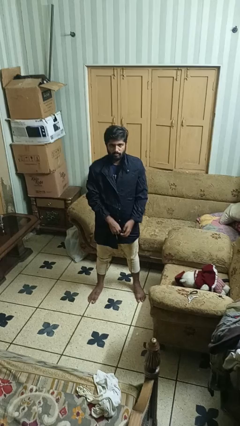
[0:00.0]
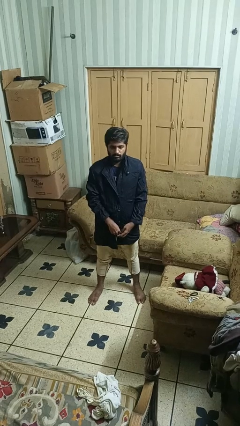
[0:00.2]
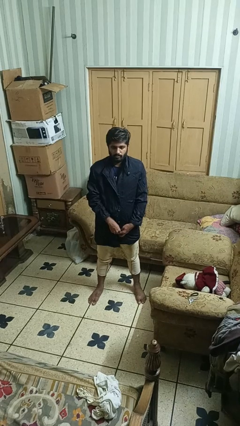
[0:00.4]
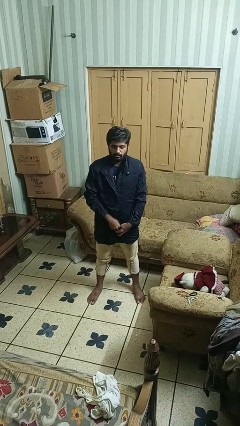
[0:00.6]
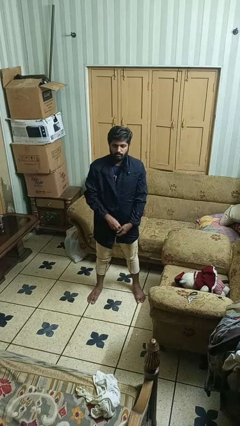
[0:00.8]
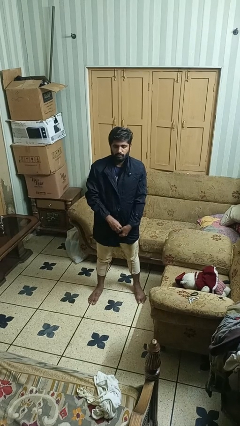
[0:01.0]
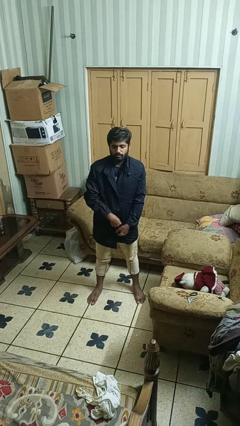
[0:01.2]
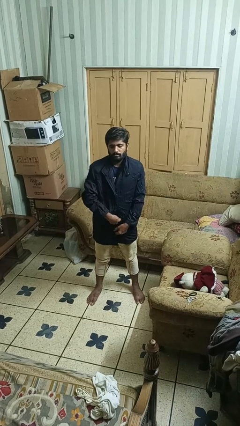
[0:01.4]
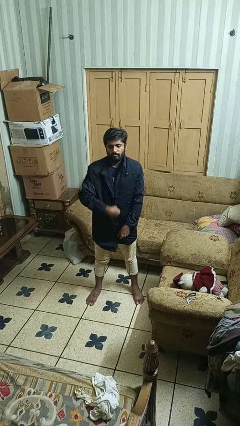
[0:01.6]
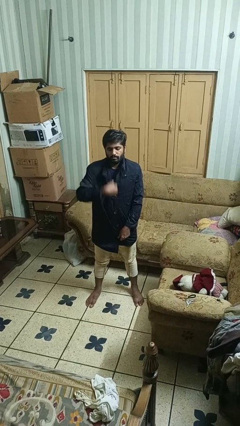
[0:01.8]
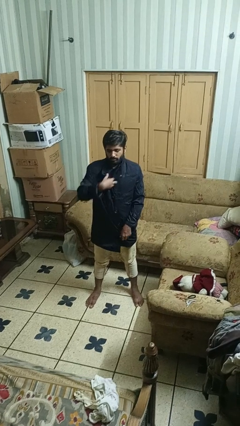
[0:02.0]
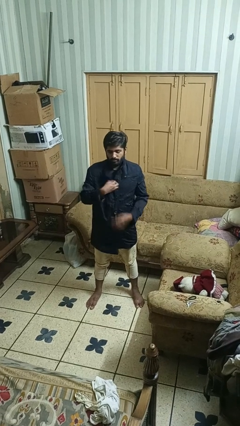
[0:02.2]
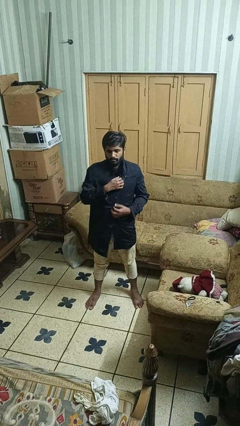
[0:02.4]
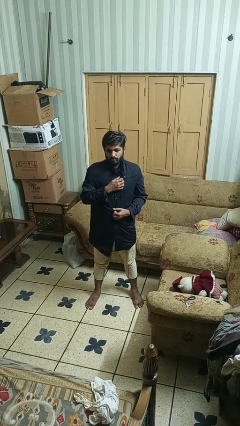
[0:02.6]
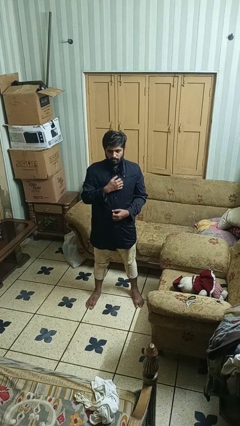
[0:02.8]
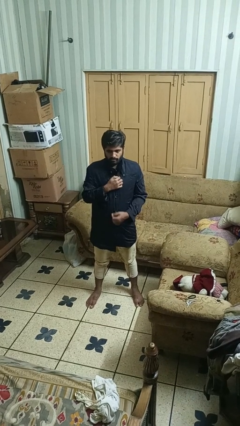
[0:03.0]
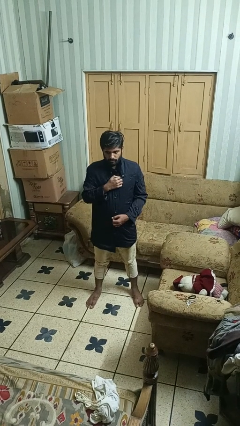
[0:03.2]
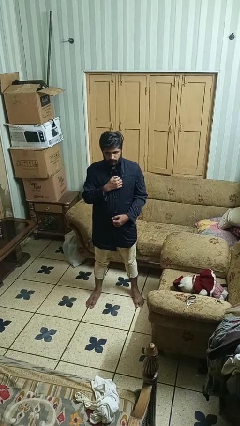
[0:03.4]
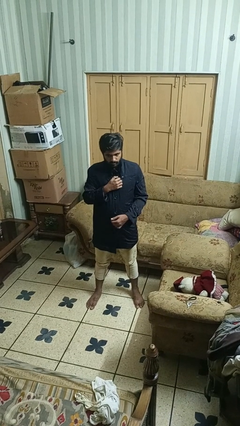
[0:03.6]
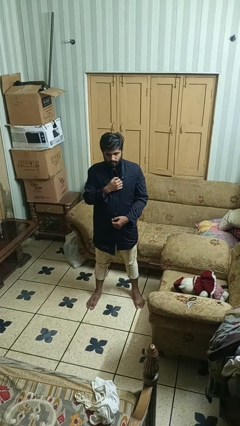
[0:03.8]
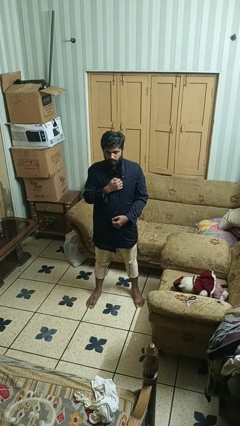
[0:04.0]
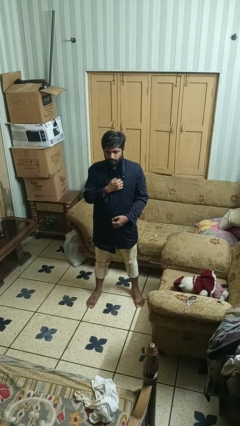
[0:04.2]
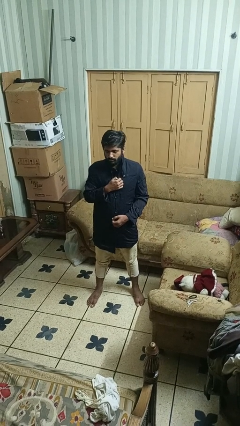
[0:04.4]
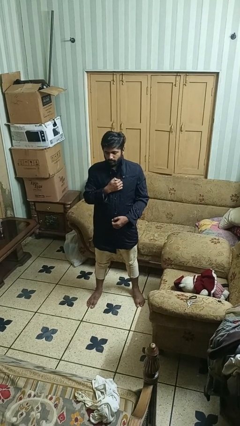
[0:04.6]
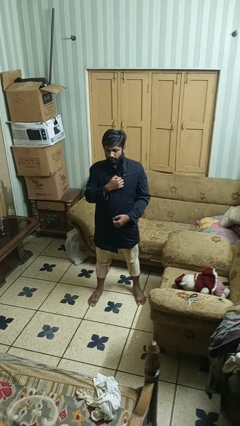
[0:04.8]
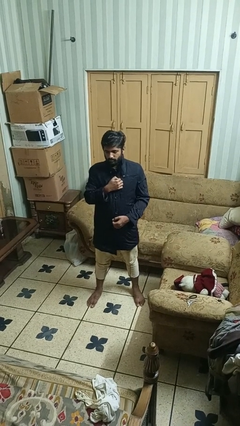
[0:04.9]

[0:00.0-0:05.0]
person zips up jacket

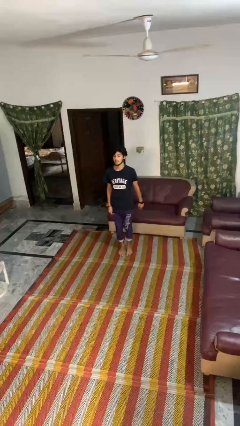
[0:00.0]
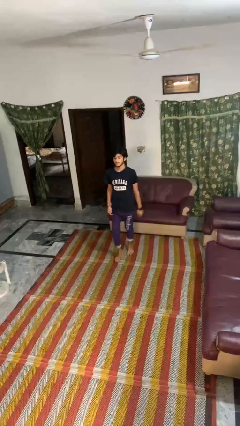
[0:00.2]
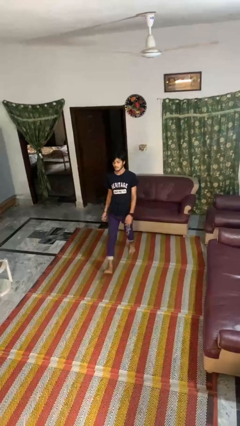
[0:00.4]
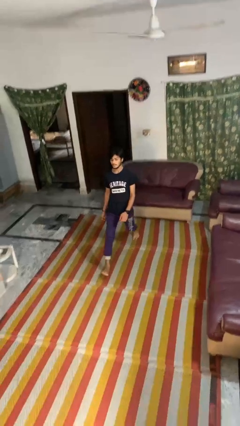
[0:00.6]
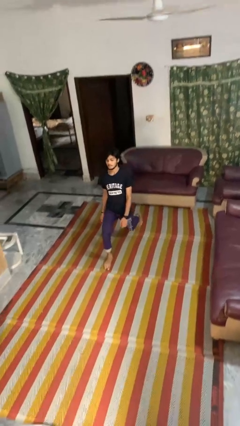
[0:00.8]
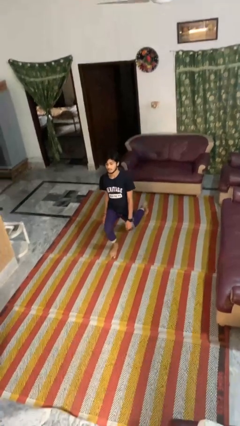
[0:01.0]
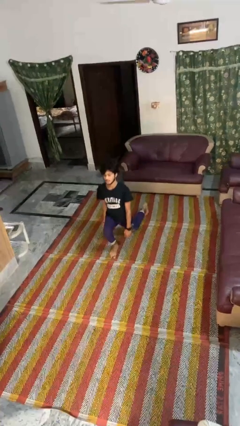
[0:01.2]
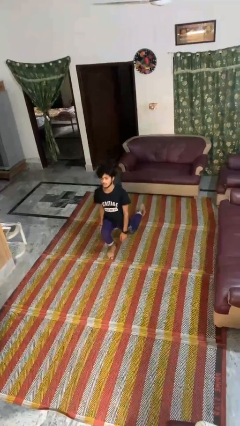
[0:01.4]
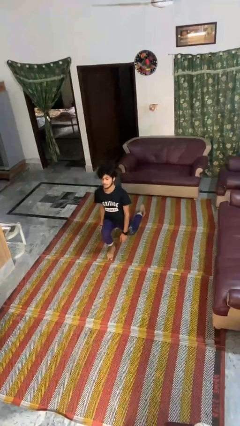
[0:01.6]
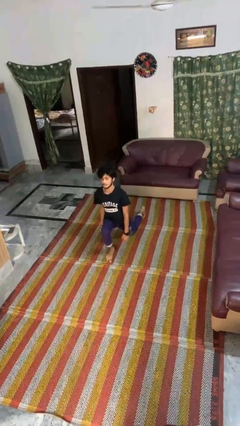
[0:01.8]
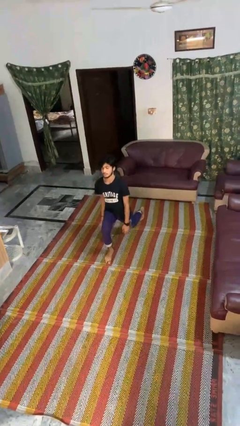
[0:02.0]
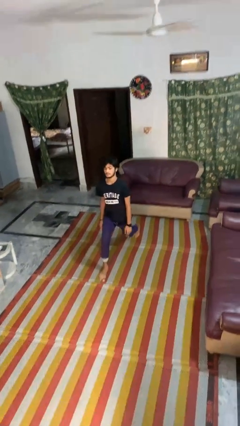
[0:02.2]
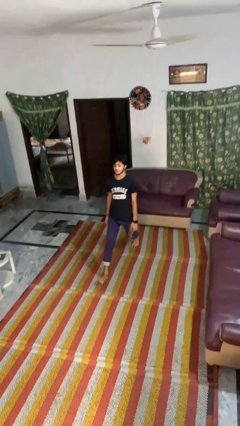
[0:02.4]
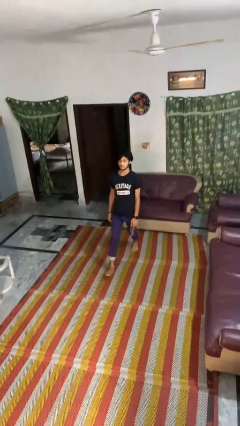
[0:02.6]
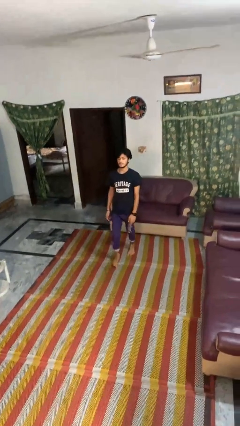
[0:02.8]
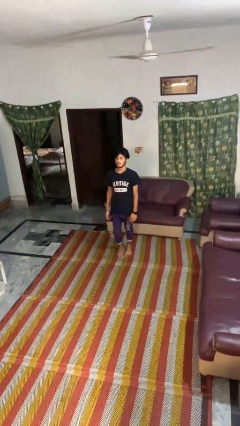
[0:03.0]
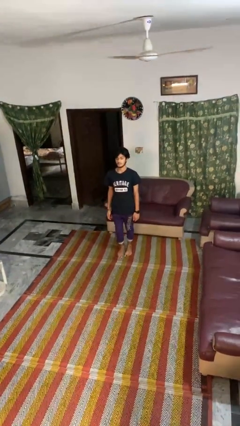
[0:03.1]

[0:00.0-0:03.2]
person exercises with lunges

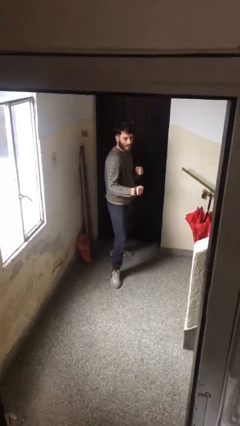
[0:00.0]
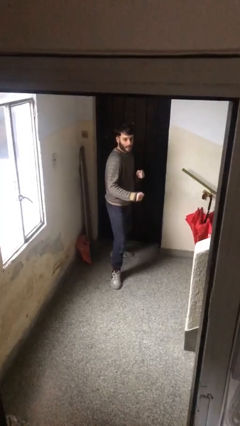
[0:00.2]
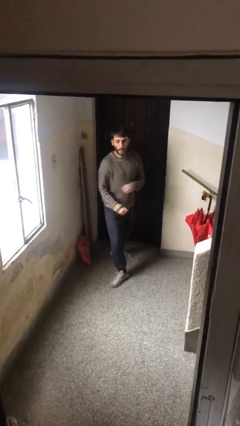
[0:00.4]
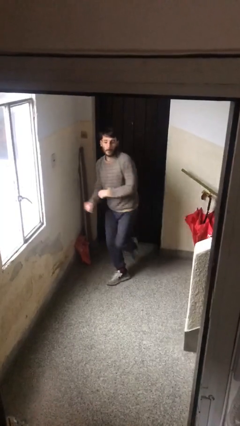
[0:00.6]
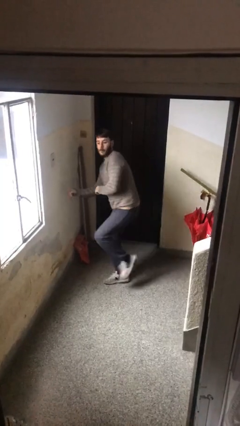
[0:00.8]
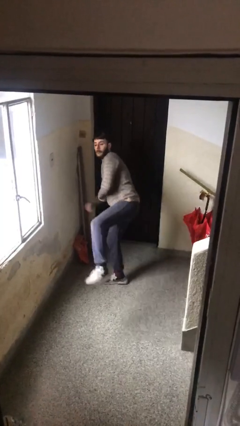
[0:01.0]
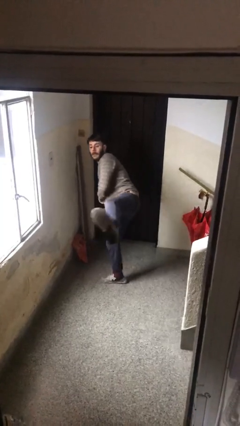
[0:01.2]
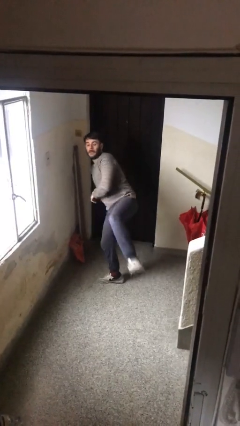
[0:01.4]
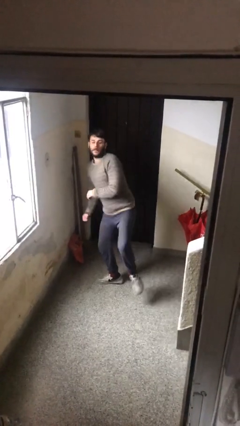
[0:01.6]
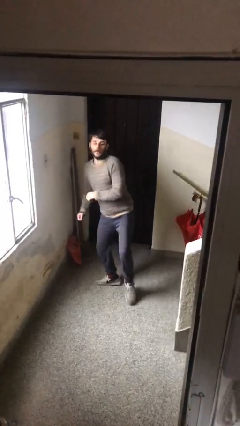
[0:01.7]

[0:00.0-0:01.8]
person karate kicks

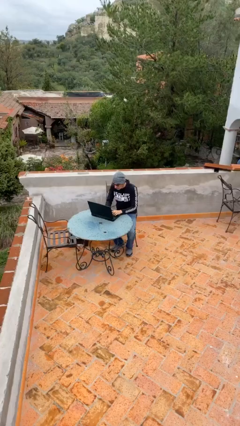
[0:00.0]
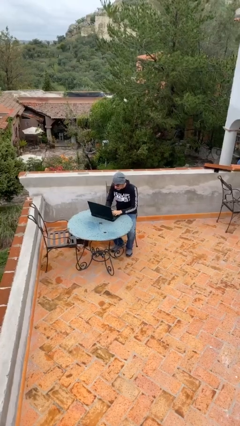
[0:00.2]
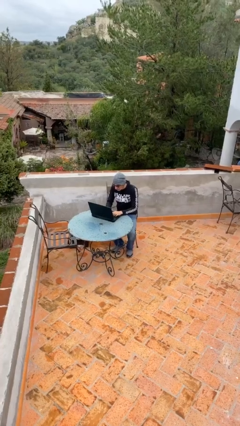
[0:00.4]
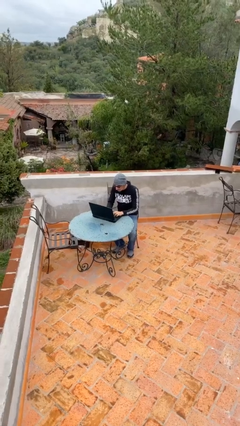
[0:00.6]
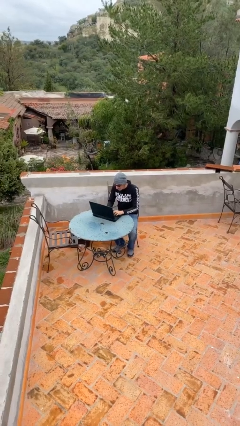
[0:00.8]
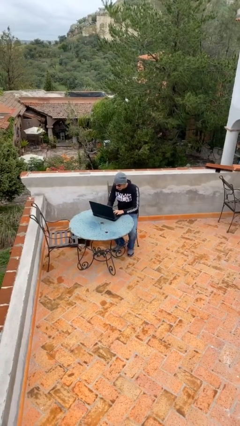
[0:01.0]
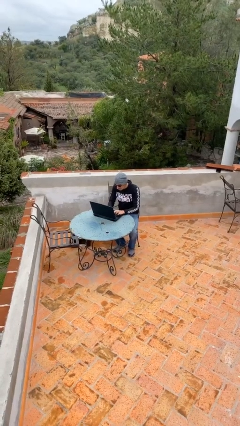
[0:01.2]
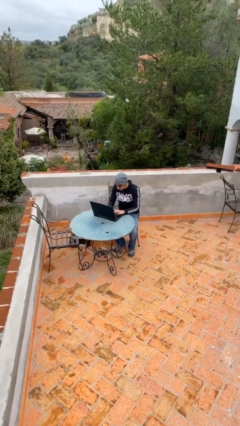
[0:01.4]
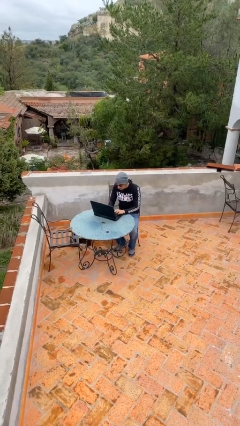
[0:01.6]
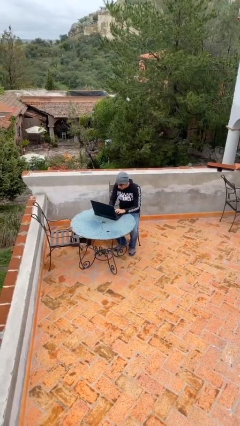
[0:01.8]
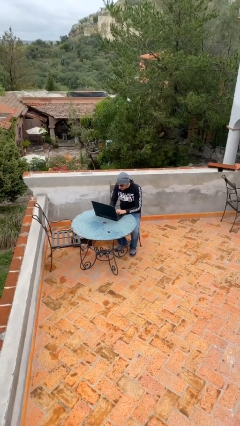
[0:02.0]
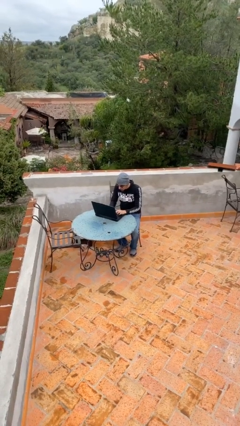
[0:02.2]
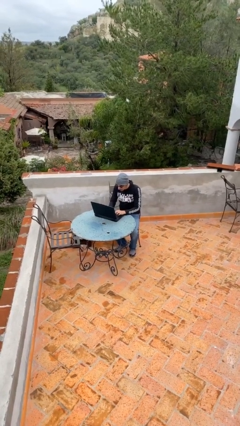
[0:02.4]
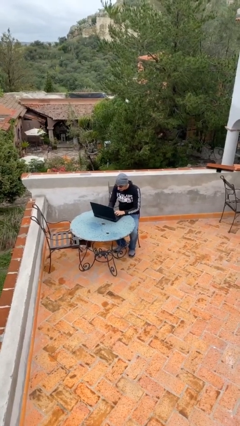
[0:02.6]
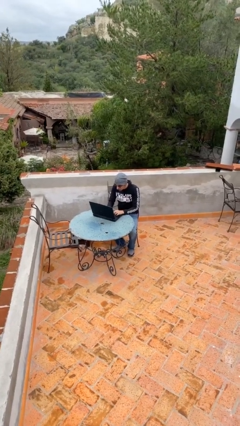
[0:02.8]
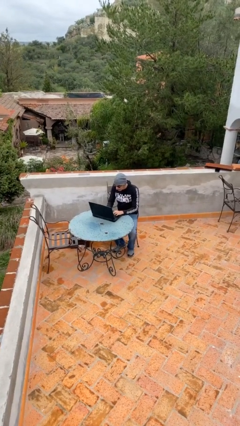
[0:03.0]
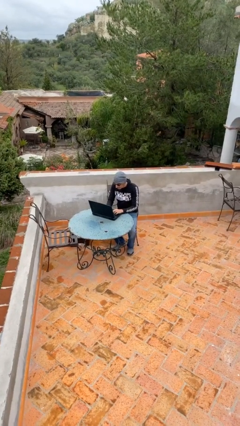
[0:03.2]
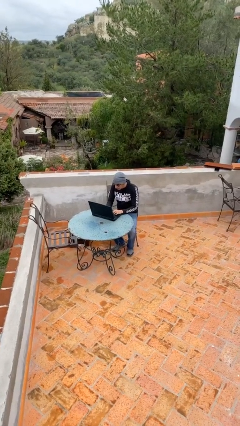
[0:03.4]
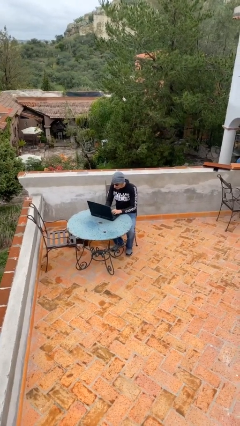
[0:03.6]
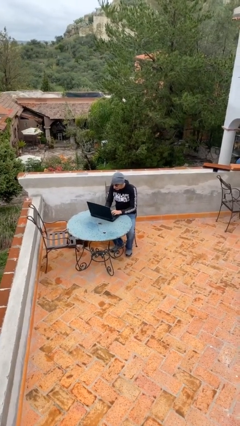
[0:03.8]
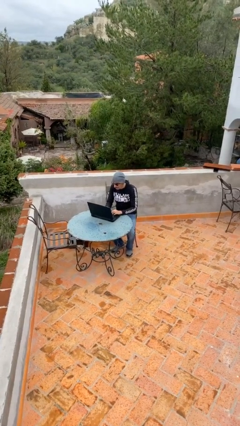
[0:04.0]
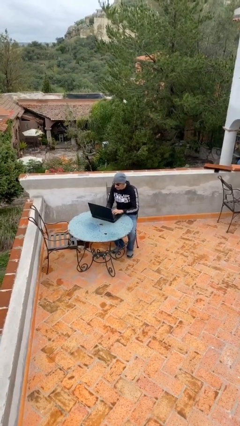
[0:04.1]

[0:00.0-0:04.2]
person interacts with laptop

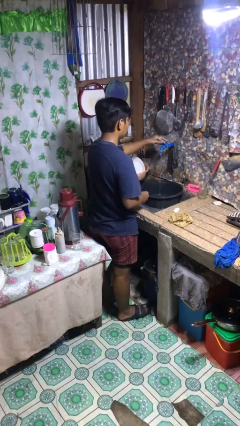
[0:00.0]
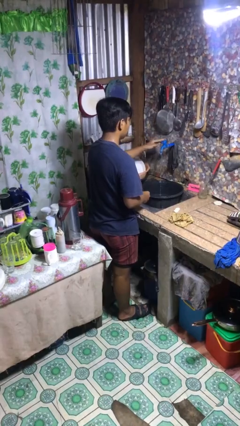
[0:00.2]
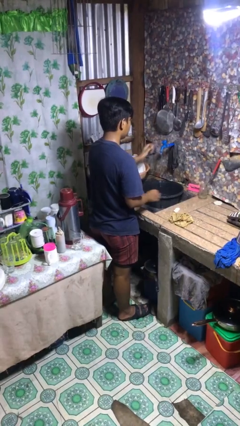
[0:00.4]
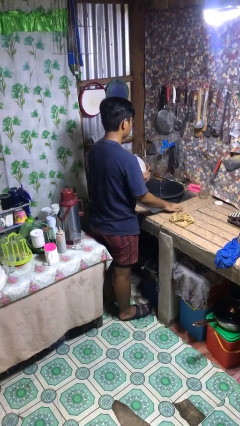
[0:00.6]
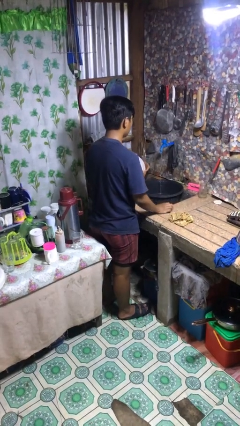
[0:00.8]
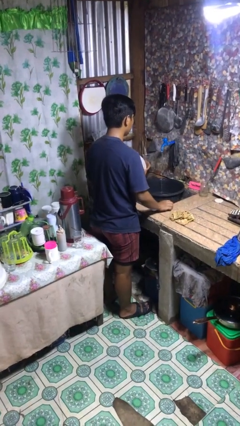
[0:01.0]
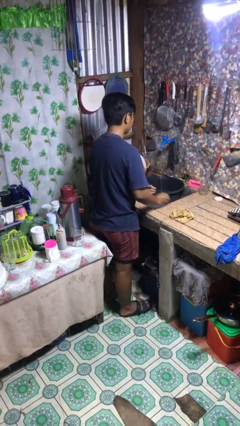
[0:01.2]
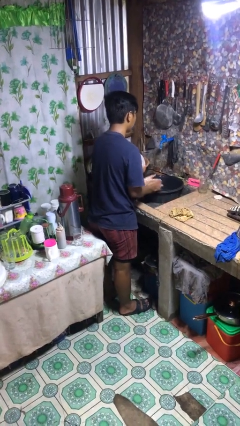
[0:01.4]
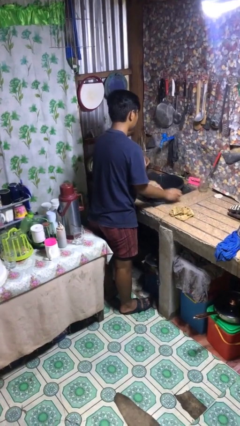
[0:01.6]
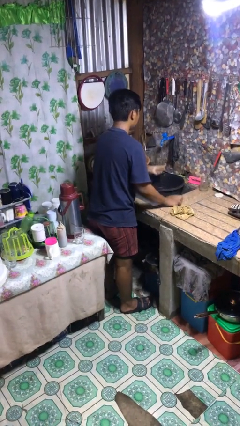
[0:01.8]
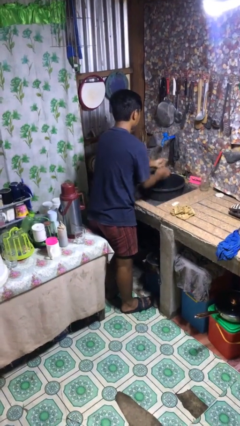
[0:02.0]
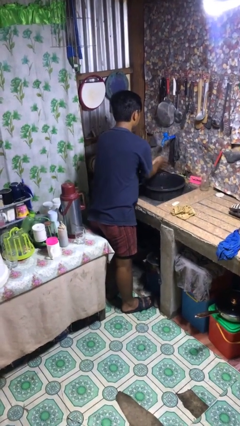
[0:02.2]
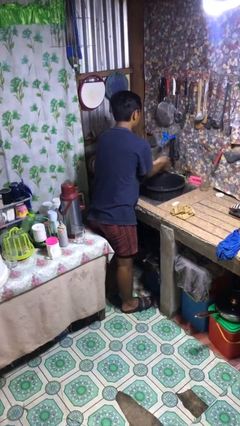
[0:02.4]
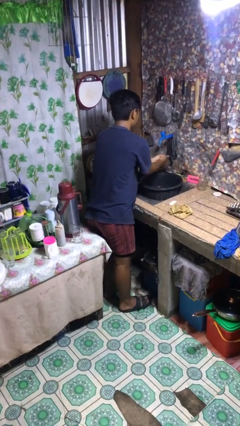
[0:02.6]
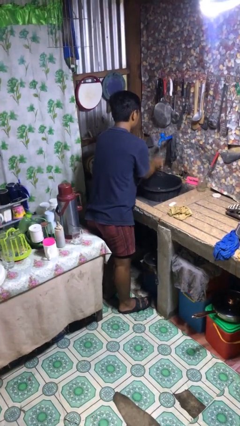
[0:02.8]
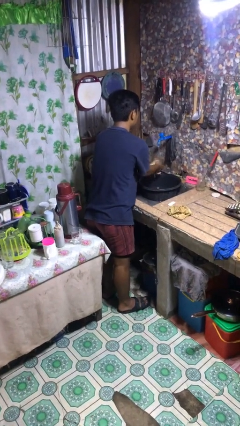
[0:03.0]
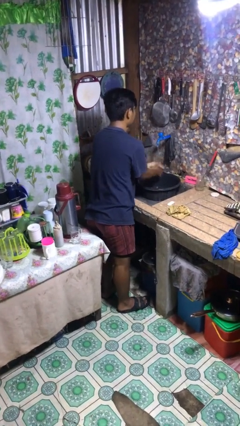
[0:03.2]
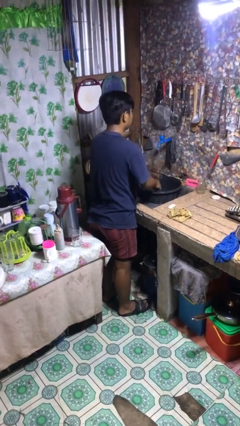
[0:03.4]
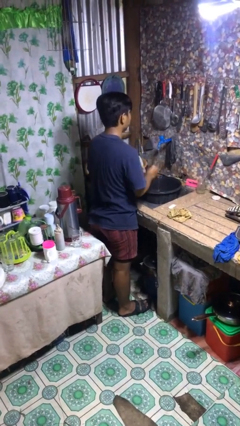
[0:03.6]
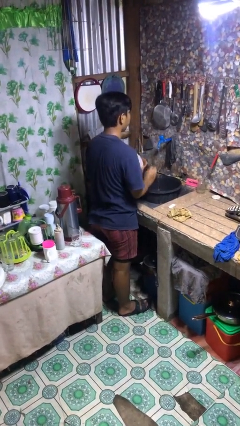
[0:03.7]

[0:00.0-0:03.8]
person washes hands
